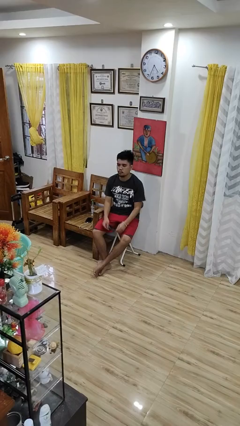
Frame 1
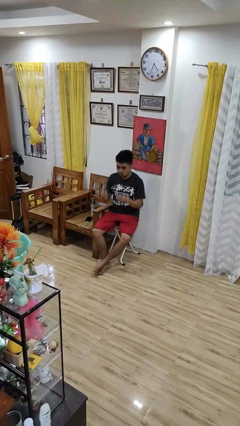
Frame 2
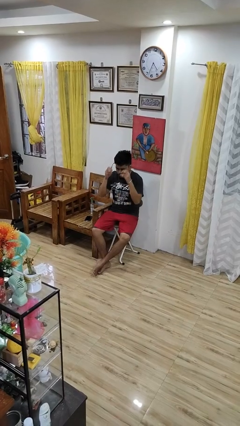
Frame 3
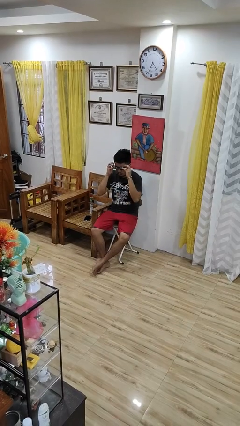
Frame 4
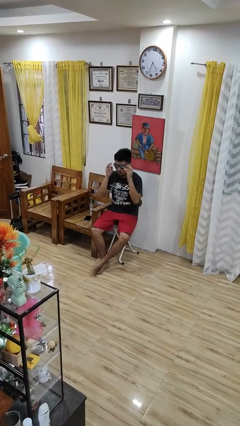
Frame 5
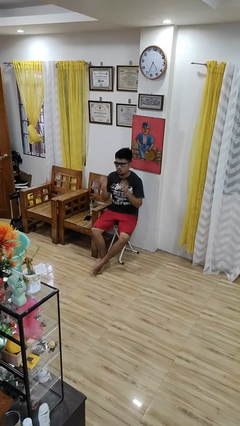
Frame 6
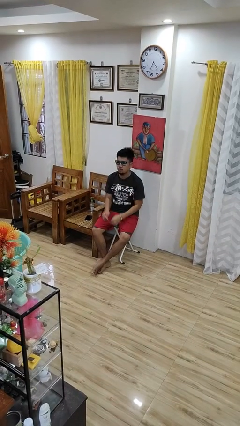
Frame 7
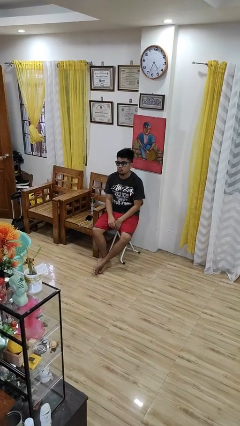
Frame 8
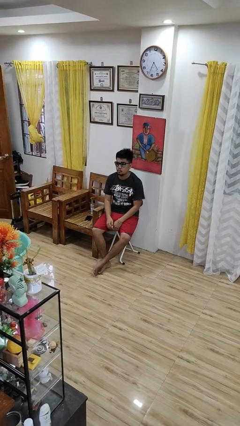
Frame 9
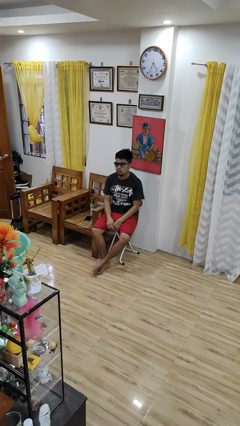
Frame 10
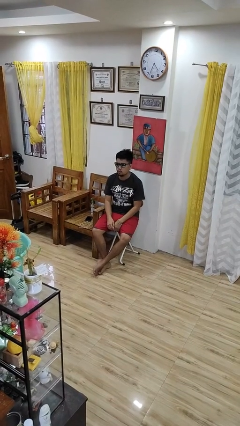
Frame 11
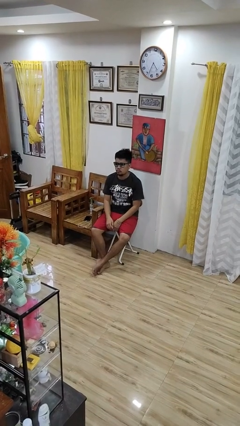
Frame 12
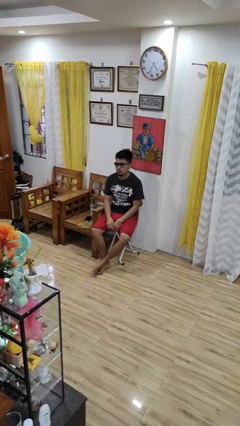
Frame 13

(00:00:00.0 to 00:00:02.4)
person puts on sunglasses

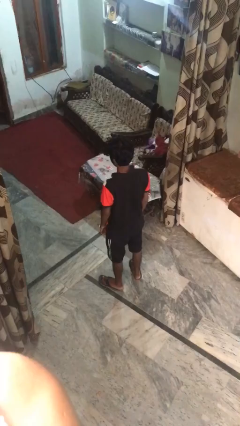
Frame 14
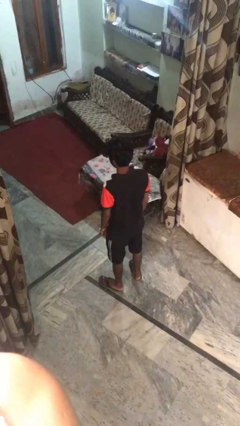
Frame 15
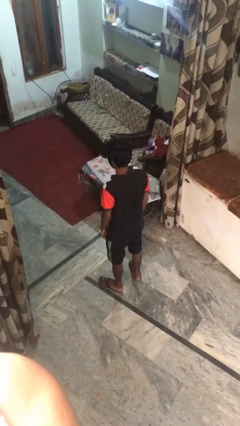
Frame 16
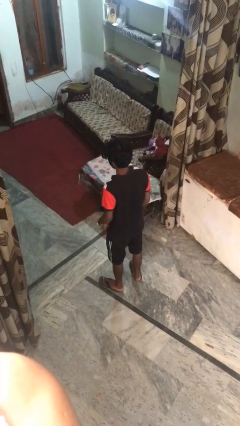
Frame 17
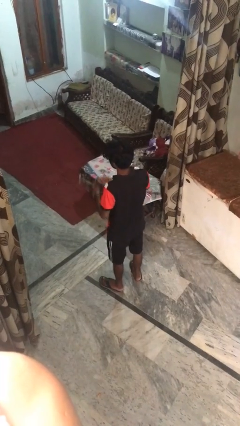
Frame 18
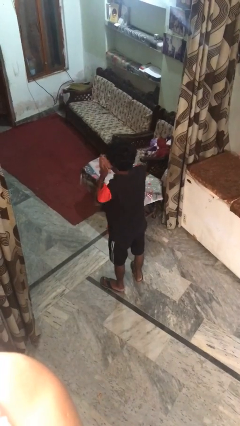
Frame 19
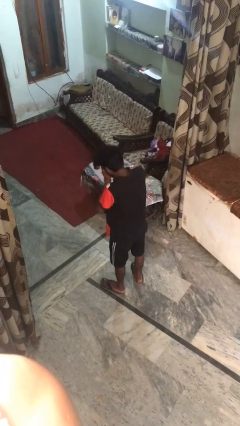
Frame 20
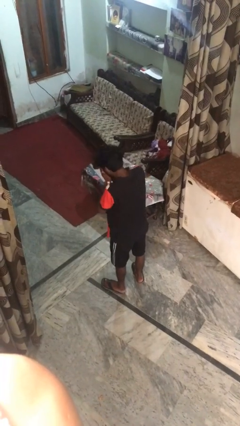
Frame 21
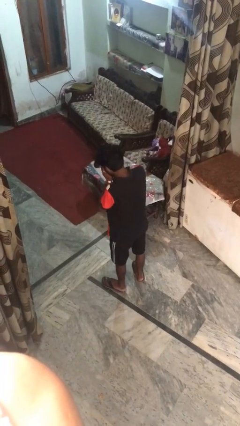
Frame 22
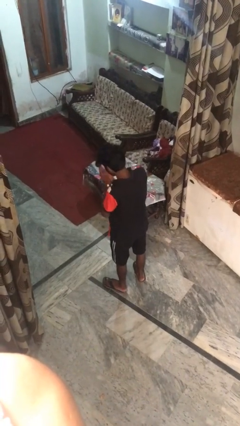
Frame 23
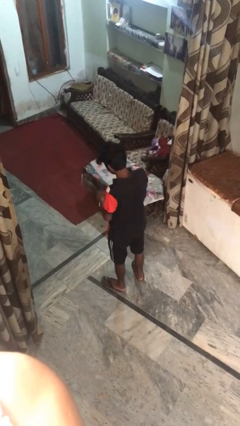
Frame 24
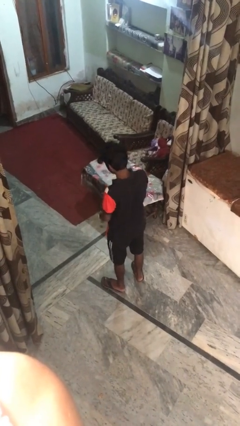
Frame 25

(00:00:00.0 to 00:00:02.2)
person sneezes into hand

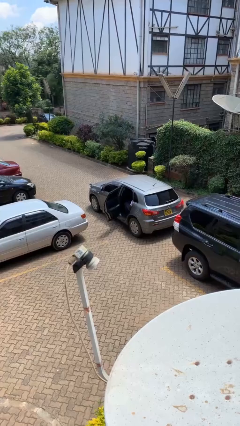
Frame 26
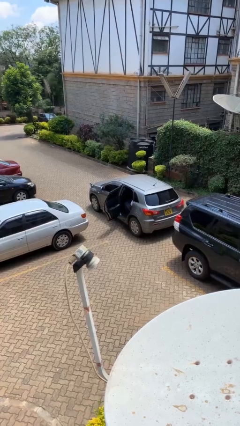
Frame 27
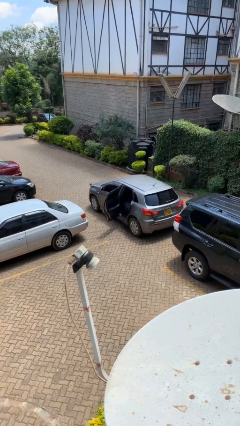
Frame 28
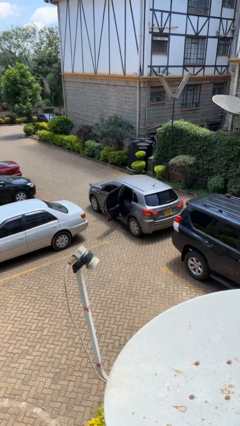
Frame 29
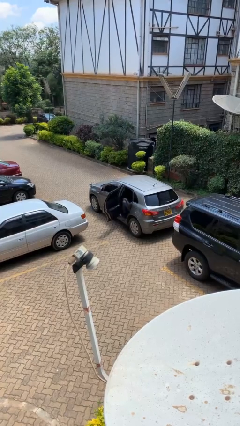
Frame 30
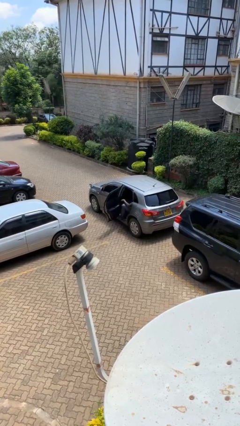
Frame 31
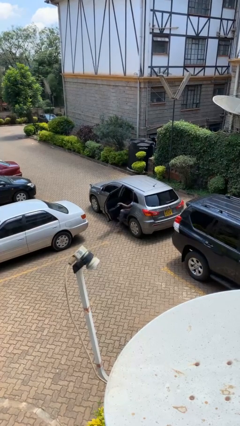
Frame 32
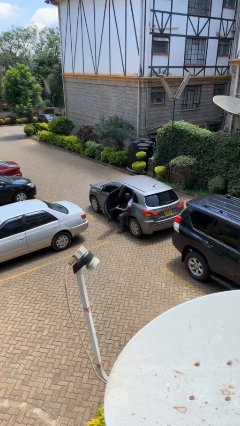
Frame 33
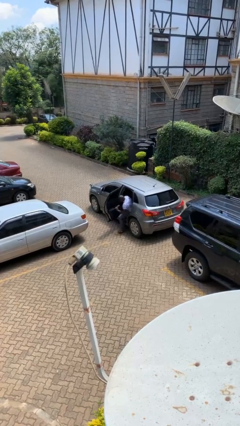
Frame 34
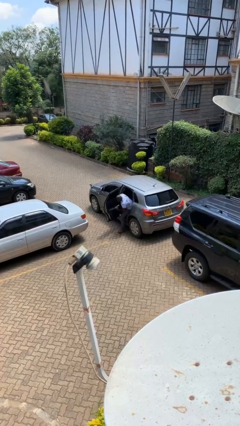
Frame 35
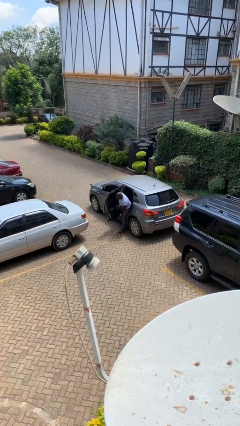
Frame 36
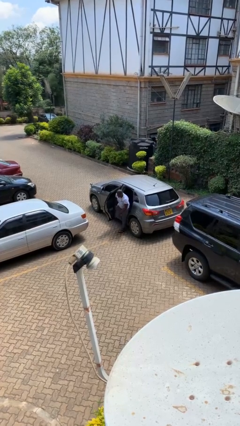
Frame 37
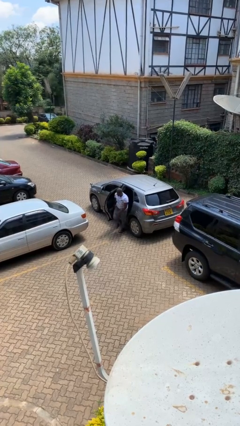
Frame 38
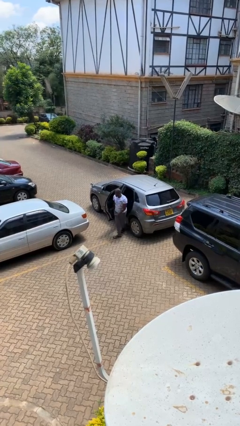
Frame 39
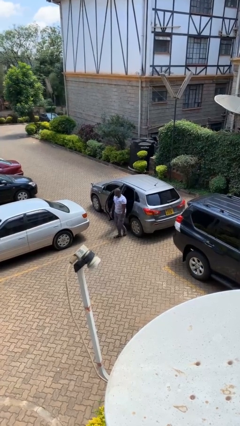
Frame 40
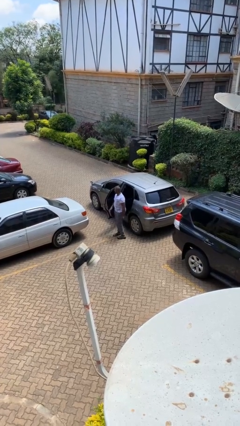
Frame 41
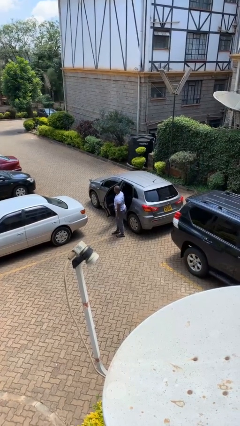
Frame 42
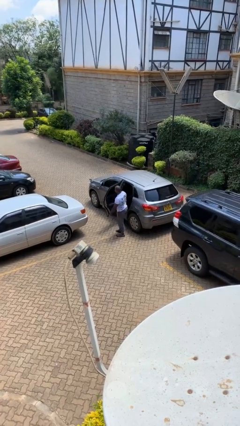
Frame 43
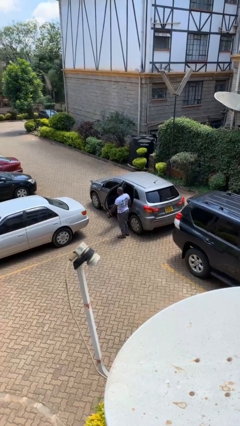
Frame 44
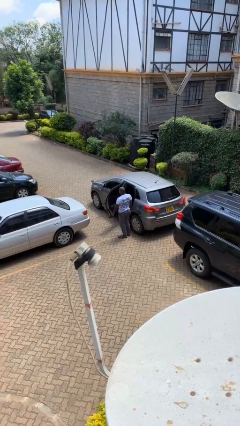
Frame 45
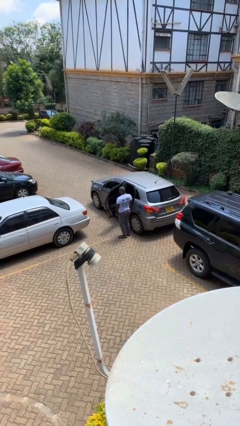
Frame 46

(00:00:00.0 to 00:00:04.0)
person exits car

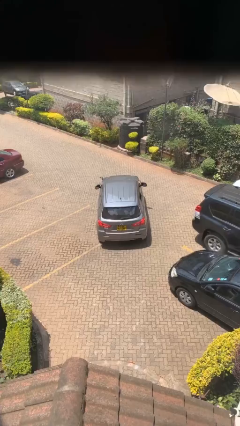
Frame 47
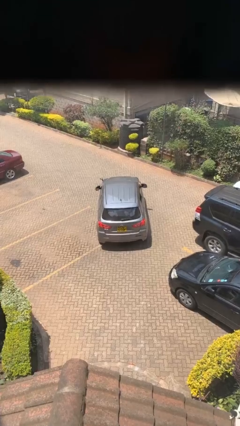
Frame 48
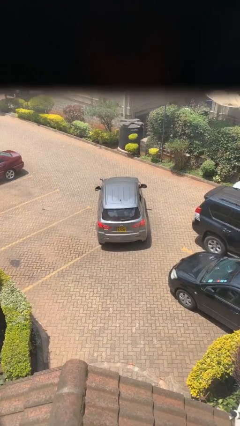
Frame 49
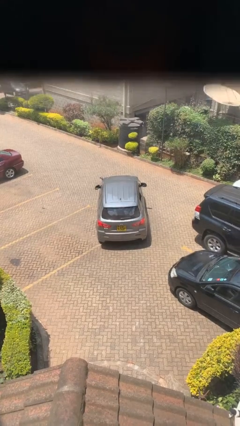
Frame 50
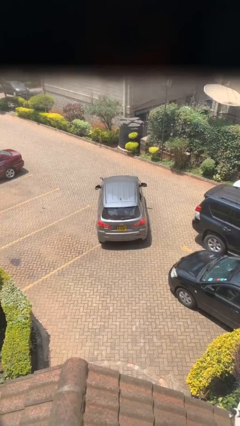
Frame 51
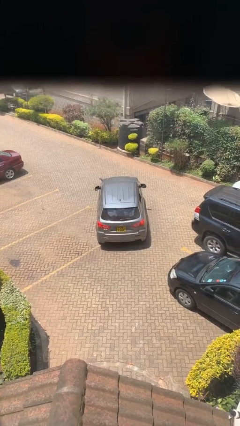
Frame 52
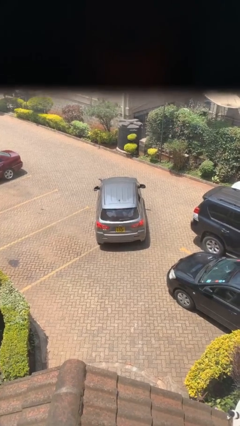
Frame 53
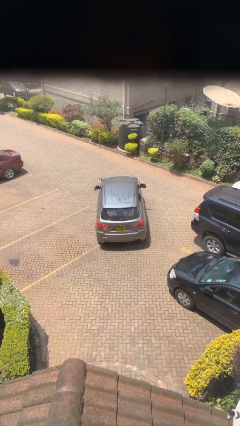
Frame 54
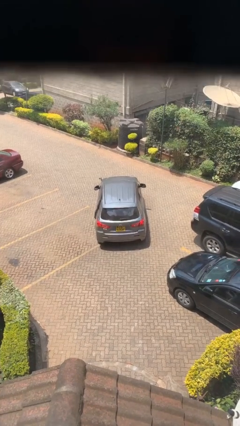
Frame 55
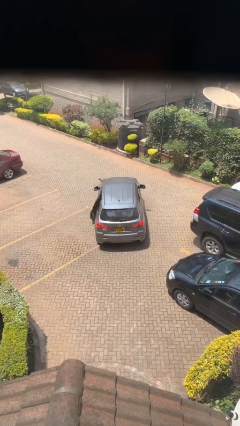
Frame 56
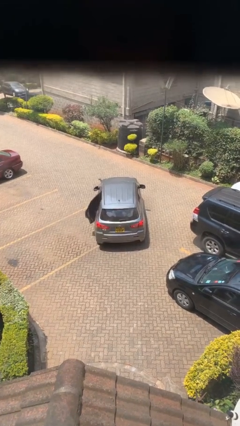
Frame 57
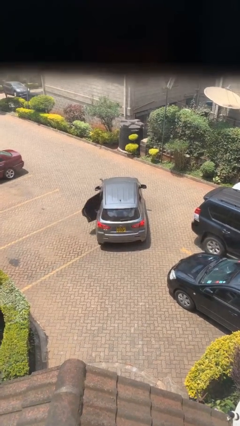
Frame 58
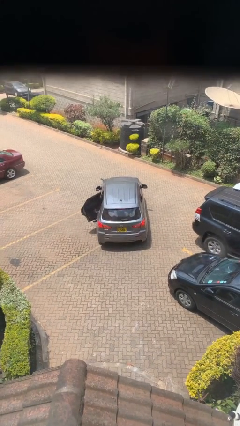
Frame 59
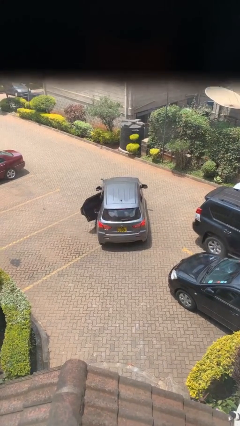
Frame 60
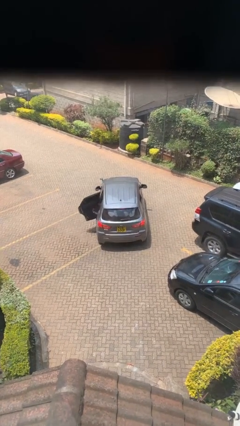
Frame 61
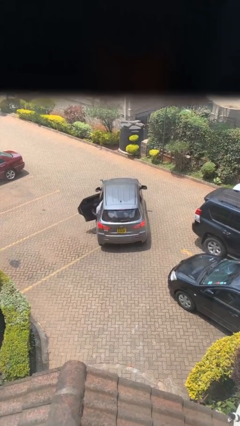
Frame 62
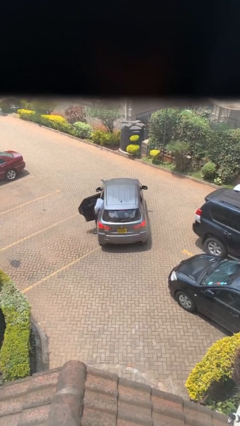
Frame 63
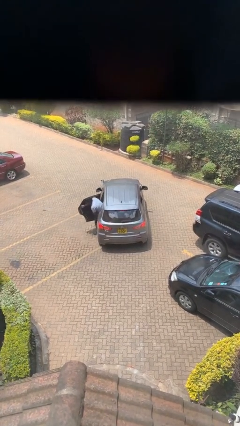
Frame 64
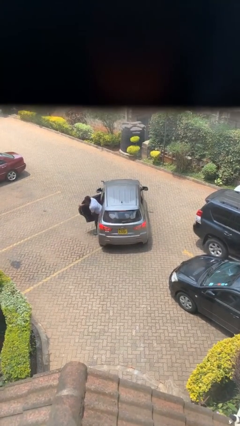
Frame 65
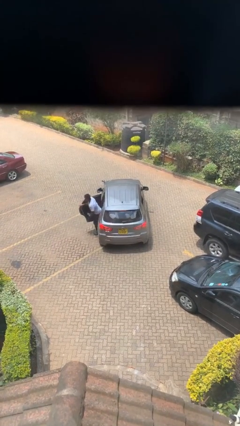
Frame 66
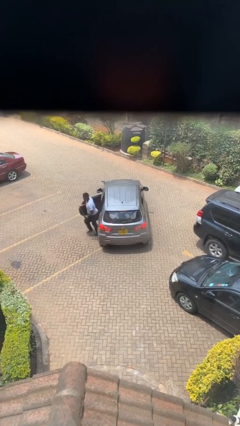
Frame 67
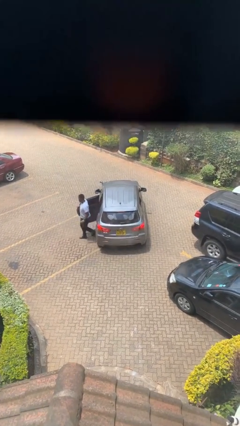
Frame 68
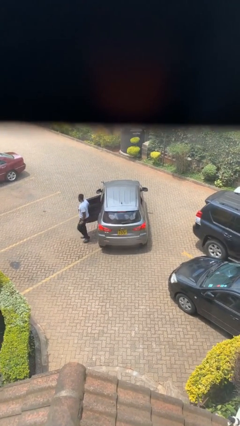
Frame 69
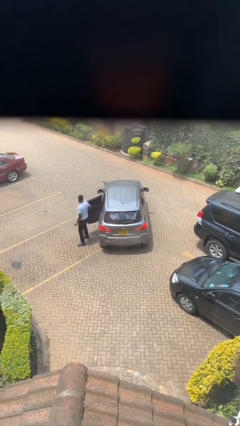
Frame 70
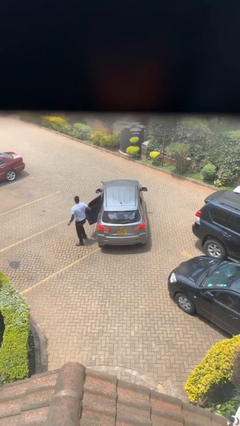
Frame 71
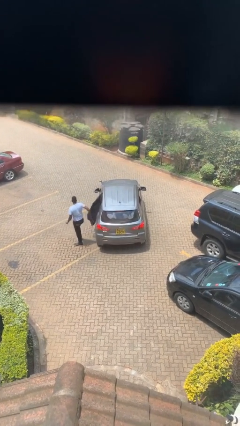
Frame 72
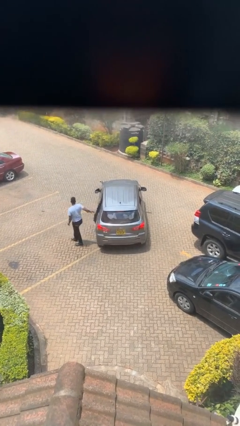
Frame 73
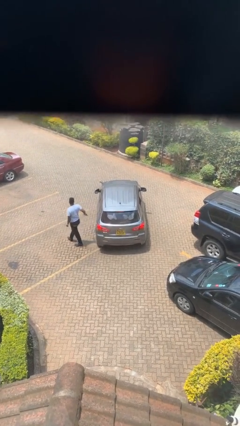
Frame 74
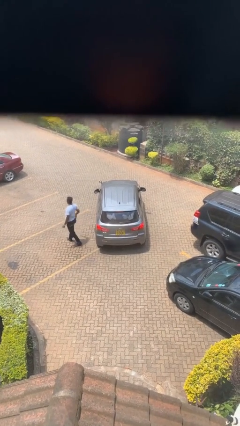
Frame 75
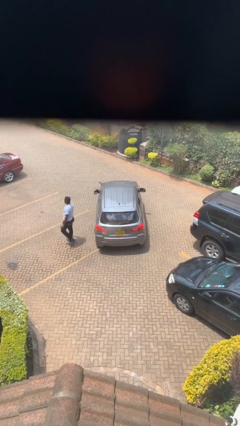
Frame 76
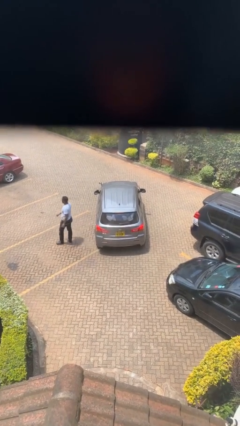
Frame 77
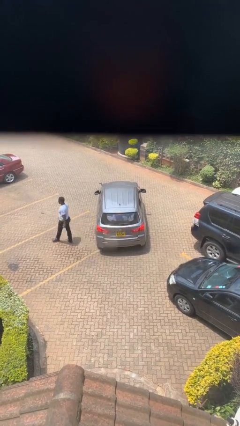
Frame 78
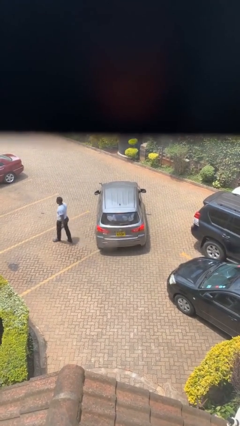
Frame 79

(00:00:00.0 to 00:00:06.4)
car drops off person

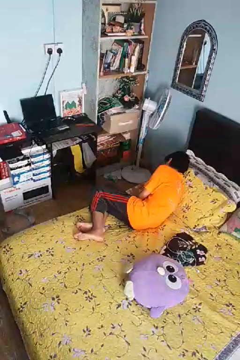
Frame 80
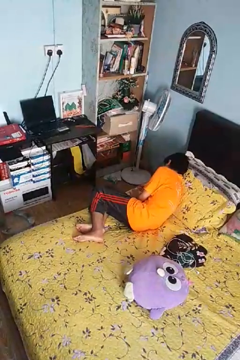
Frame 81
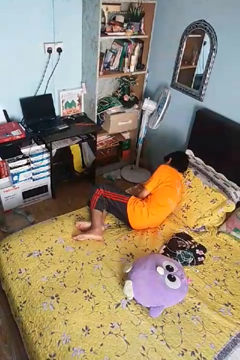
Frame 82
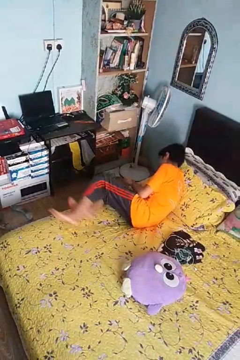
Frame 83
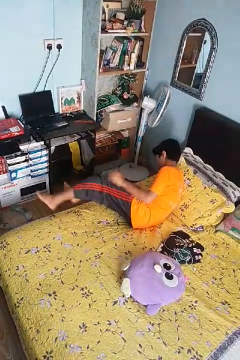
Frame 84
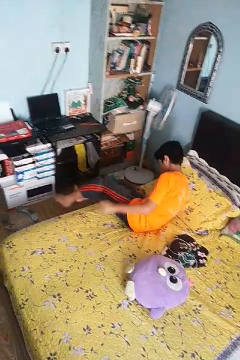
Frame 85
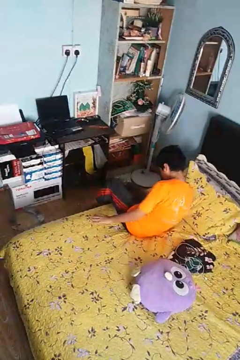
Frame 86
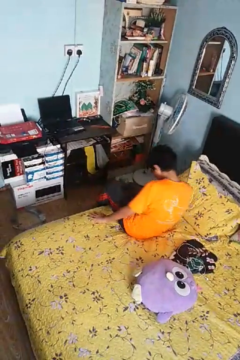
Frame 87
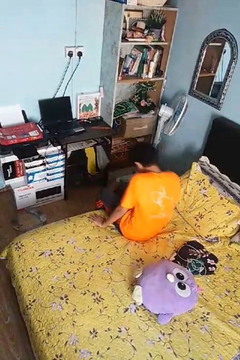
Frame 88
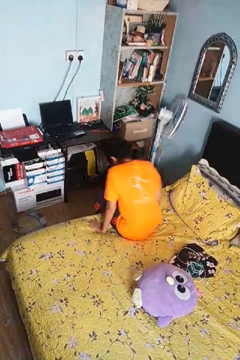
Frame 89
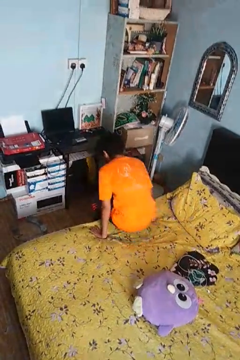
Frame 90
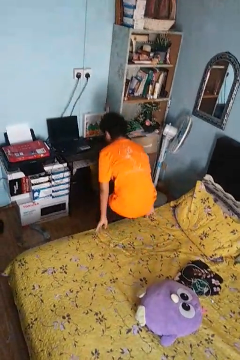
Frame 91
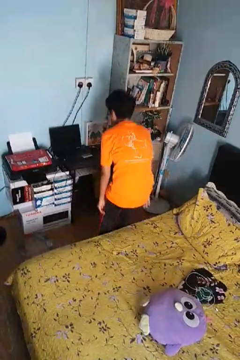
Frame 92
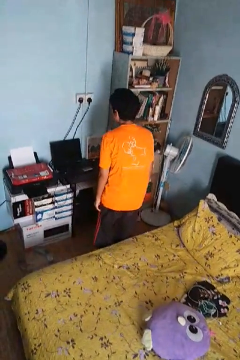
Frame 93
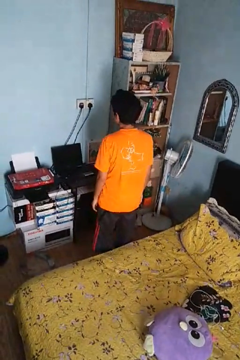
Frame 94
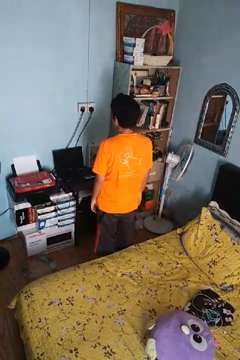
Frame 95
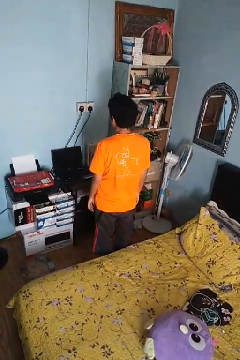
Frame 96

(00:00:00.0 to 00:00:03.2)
person stands up

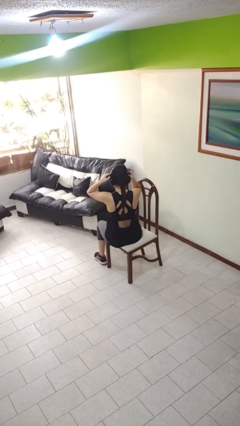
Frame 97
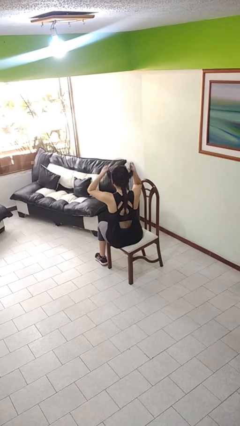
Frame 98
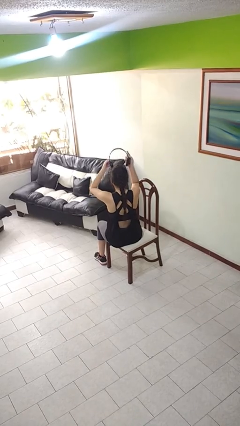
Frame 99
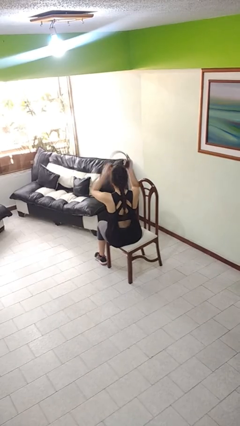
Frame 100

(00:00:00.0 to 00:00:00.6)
person takes off headphones
